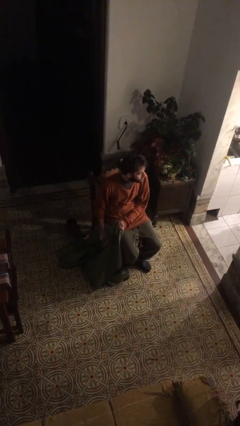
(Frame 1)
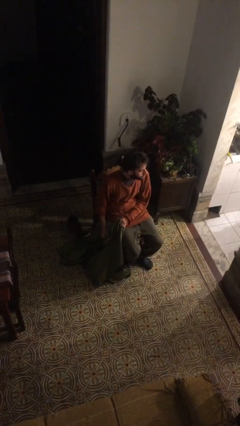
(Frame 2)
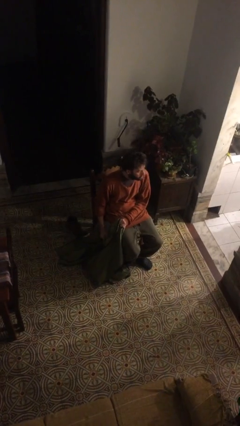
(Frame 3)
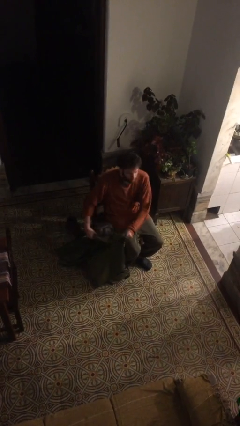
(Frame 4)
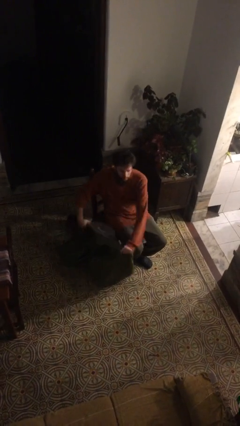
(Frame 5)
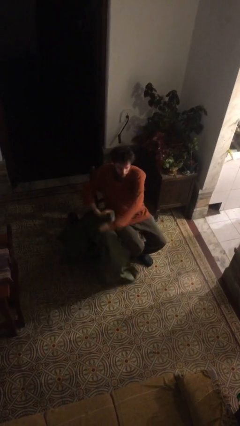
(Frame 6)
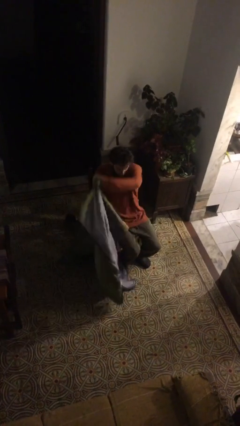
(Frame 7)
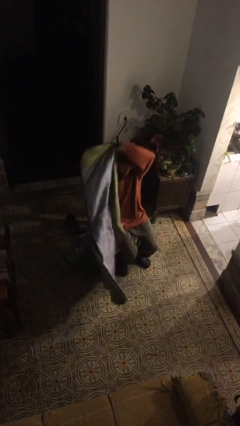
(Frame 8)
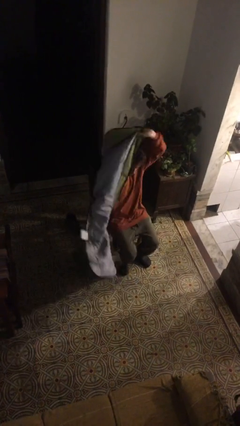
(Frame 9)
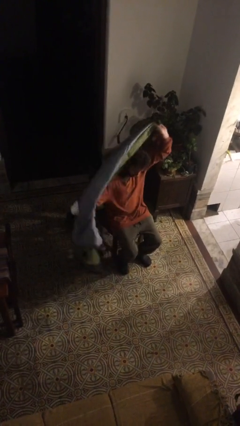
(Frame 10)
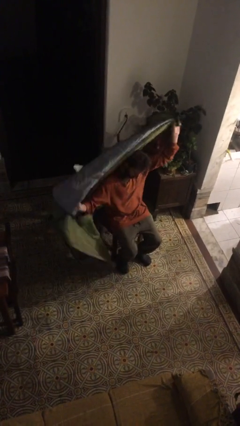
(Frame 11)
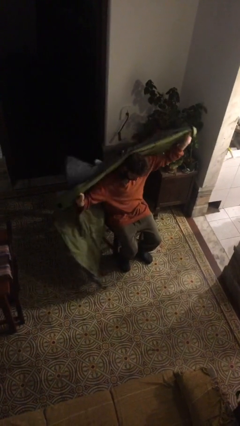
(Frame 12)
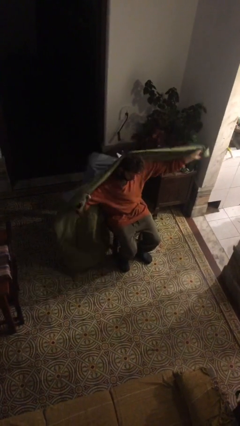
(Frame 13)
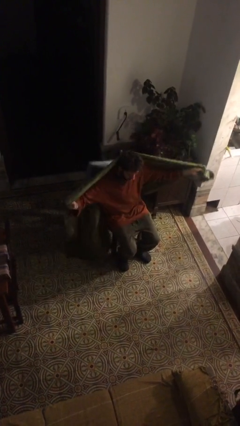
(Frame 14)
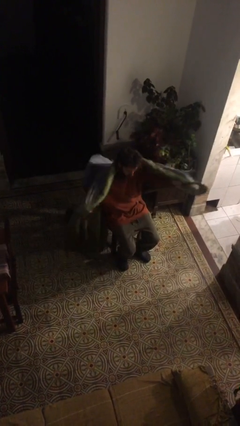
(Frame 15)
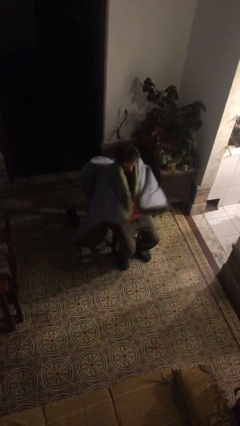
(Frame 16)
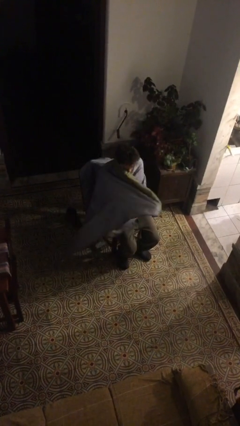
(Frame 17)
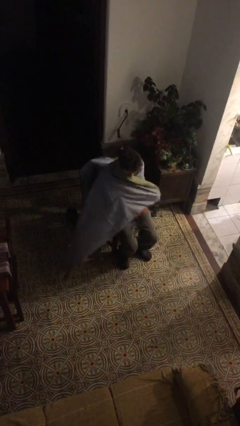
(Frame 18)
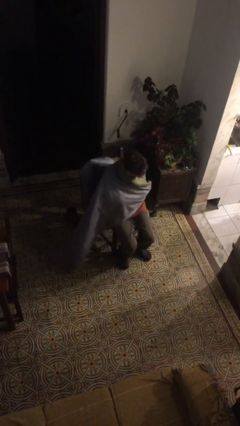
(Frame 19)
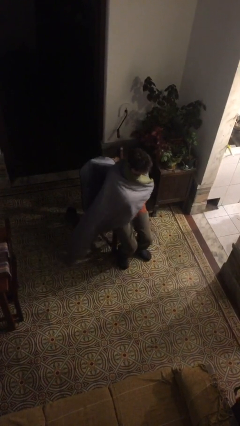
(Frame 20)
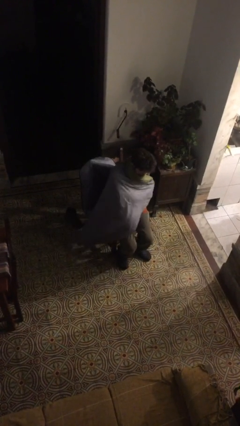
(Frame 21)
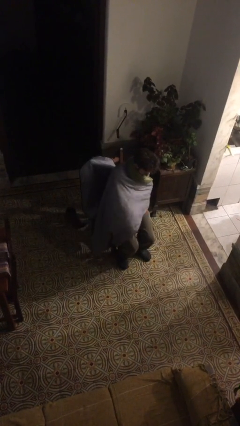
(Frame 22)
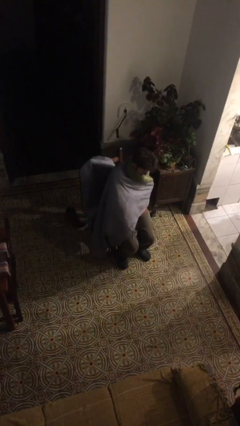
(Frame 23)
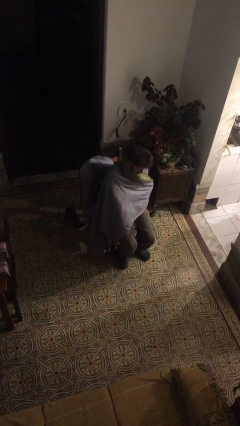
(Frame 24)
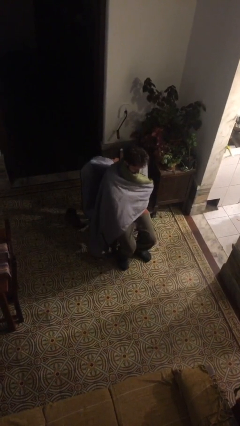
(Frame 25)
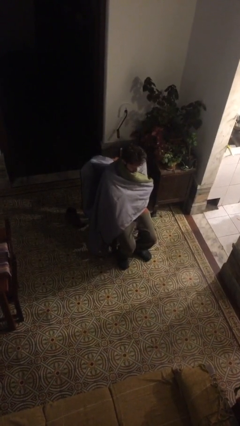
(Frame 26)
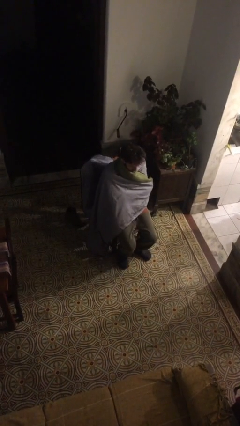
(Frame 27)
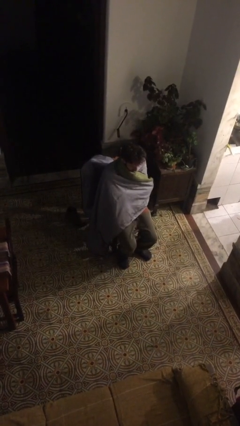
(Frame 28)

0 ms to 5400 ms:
person covers with blanket

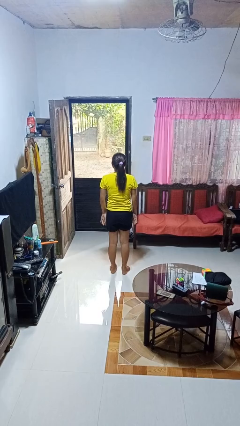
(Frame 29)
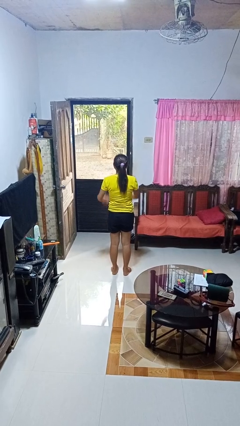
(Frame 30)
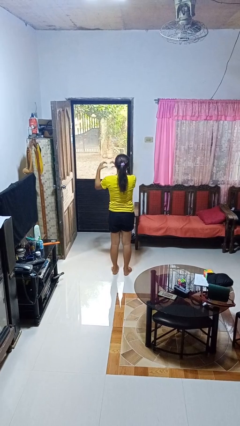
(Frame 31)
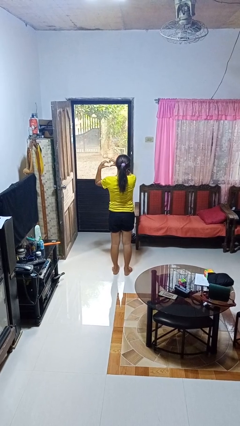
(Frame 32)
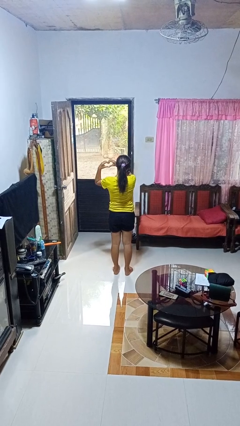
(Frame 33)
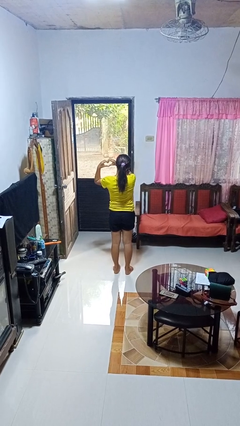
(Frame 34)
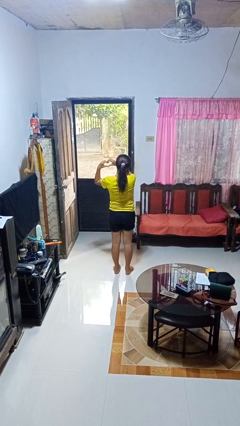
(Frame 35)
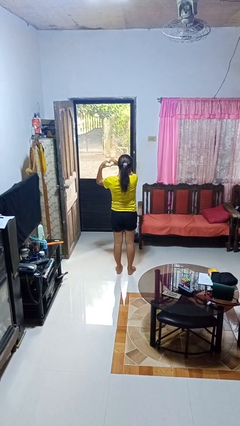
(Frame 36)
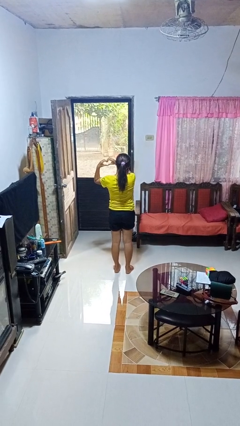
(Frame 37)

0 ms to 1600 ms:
person gestures heart

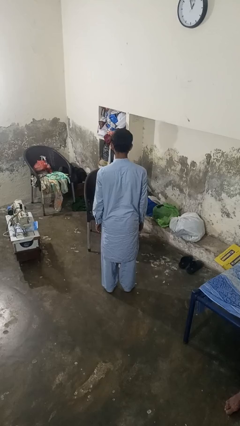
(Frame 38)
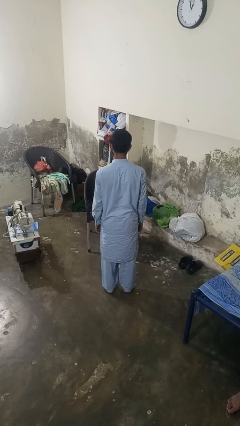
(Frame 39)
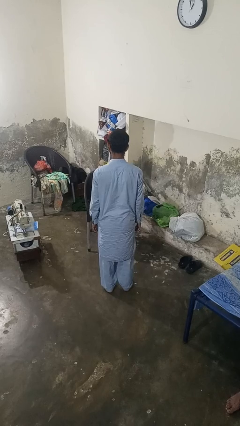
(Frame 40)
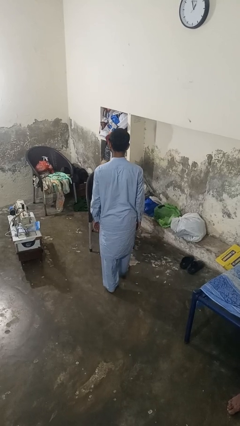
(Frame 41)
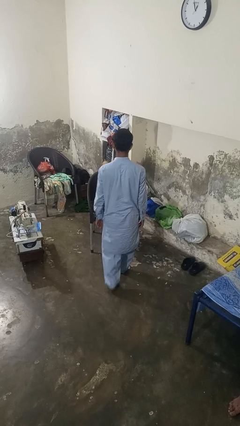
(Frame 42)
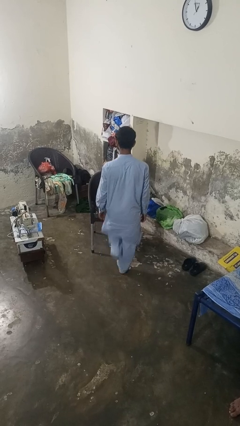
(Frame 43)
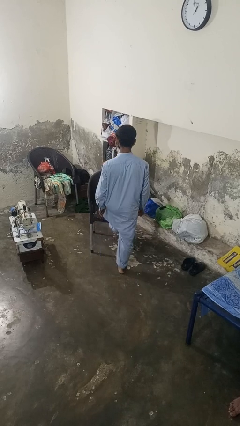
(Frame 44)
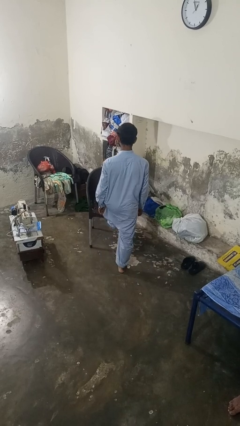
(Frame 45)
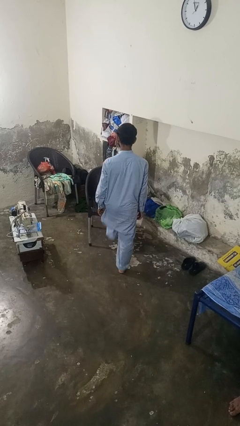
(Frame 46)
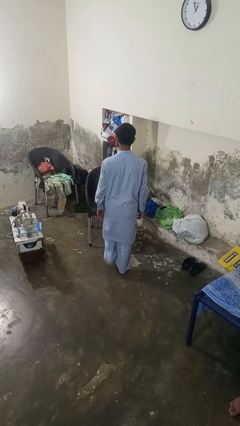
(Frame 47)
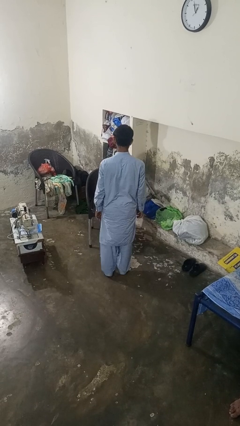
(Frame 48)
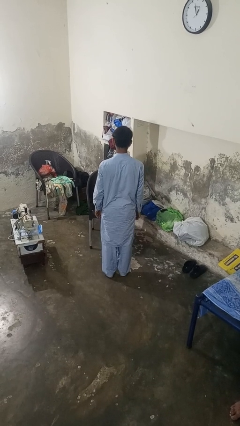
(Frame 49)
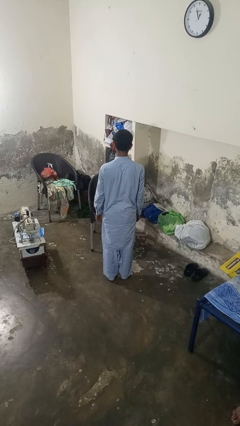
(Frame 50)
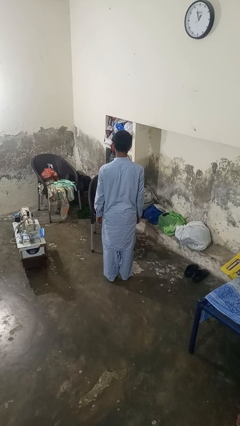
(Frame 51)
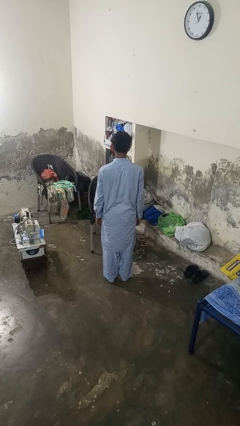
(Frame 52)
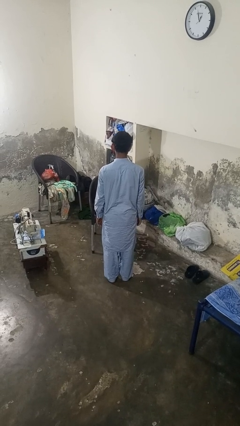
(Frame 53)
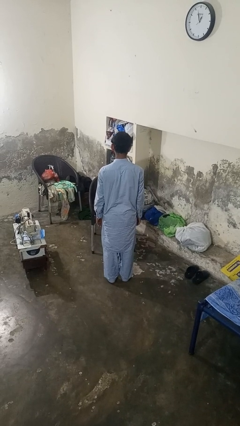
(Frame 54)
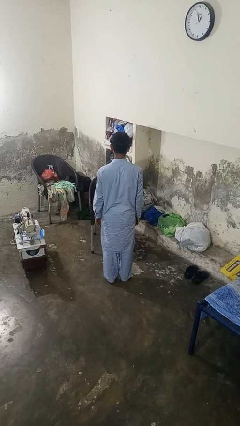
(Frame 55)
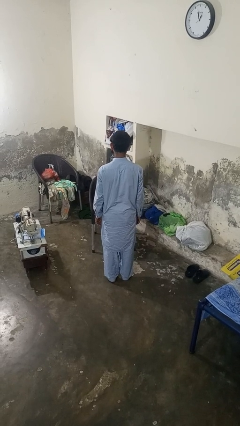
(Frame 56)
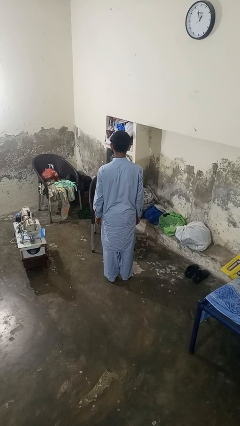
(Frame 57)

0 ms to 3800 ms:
person stubs toe

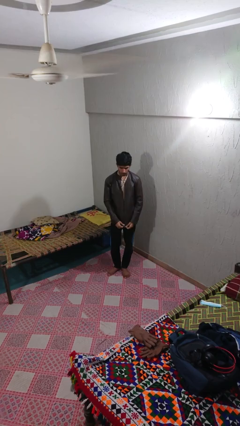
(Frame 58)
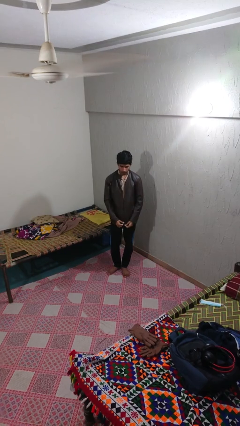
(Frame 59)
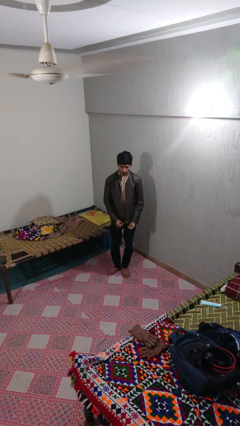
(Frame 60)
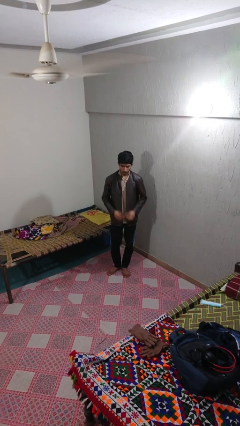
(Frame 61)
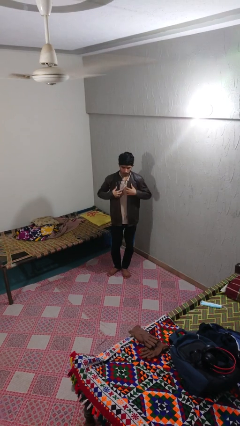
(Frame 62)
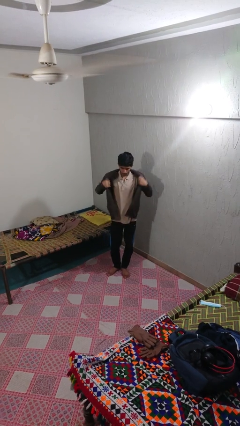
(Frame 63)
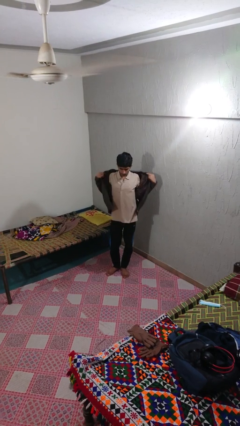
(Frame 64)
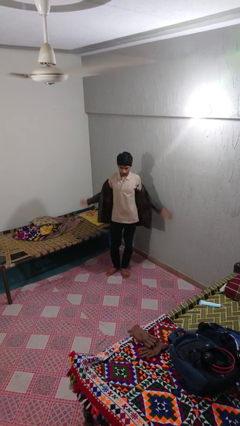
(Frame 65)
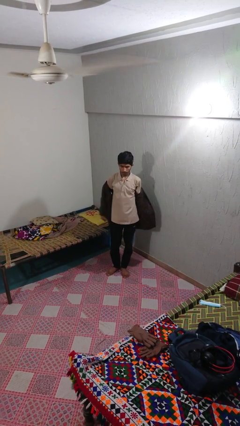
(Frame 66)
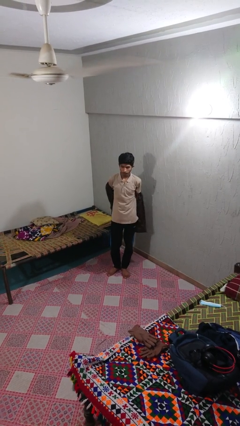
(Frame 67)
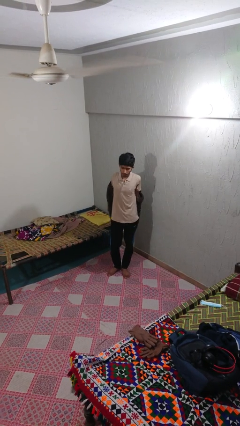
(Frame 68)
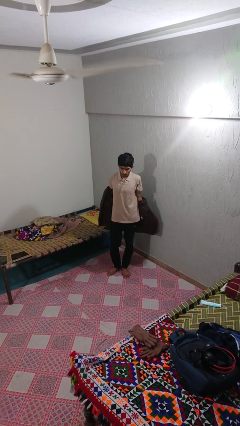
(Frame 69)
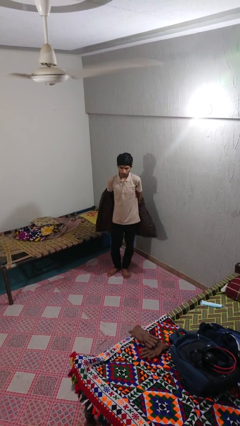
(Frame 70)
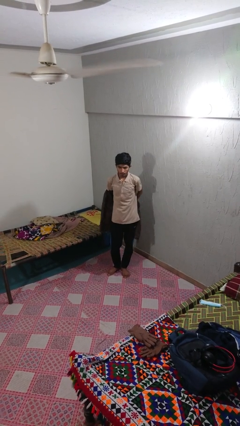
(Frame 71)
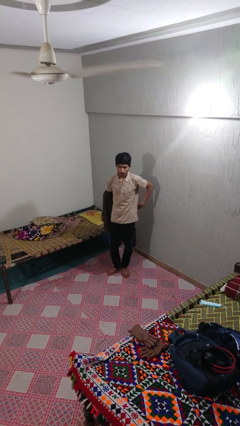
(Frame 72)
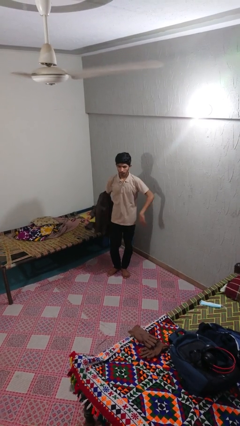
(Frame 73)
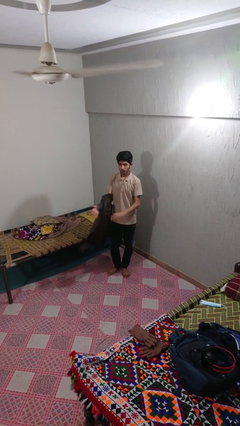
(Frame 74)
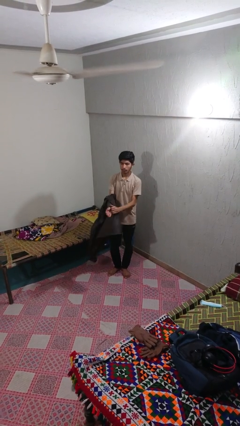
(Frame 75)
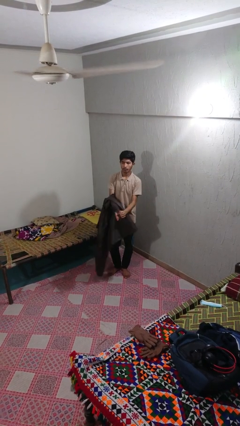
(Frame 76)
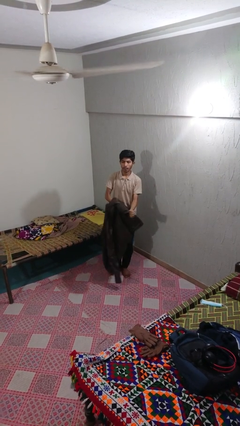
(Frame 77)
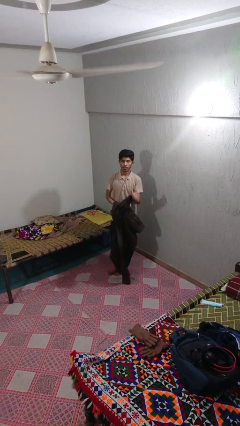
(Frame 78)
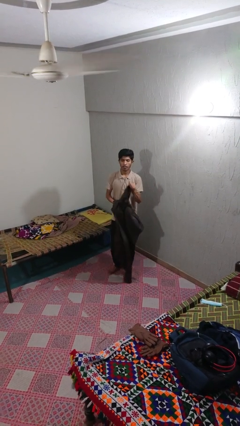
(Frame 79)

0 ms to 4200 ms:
person takes off jacket

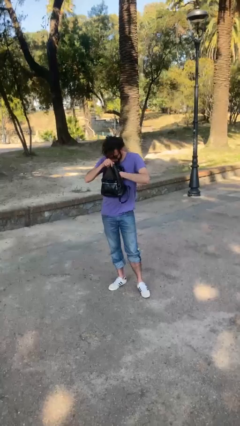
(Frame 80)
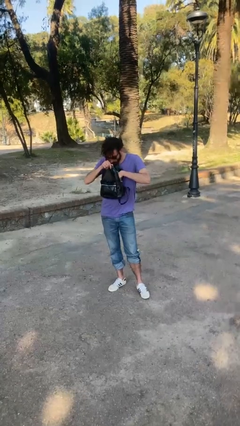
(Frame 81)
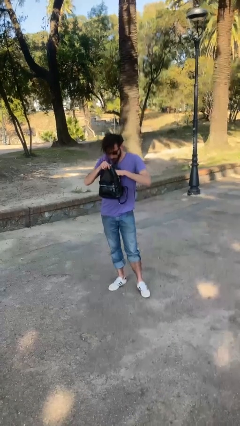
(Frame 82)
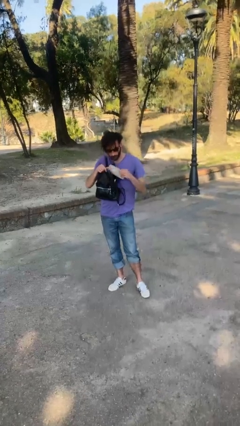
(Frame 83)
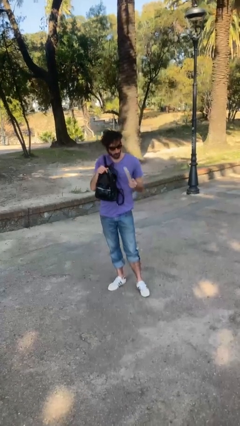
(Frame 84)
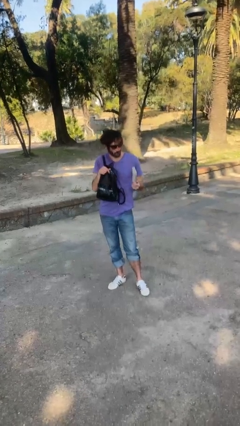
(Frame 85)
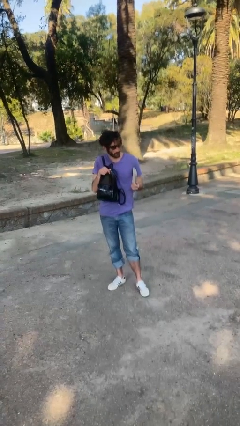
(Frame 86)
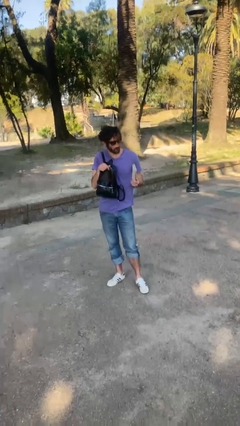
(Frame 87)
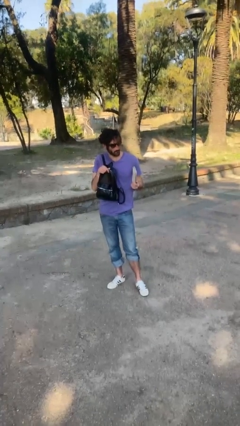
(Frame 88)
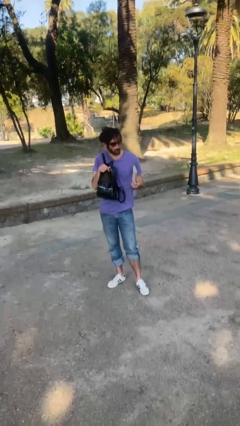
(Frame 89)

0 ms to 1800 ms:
person takes object from purse

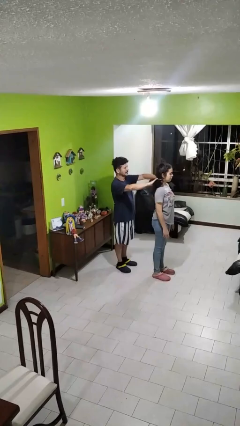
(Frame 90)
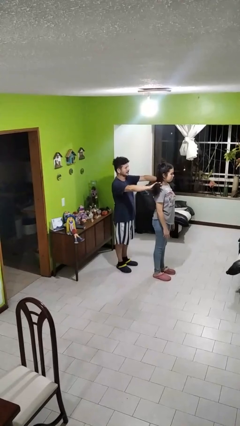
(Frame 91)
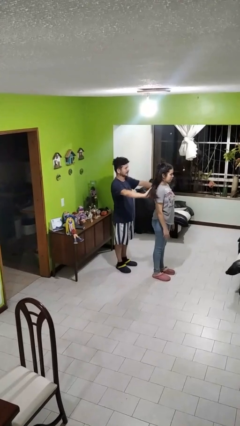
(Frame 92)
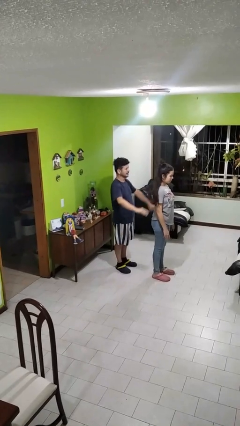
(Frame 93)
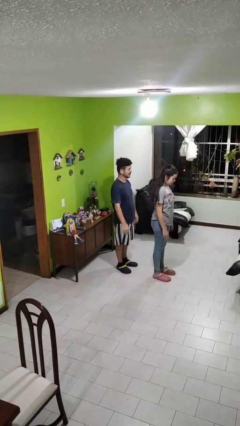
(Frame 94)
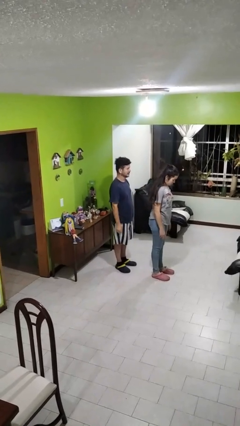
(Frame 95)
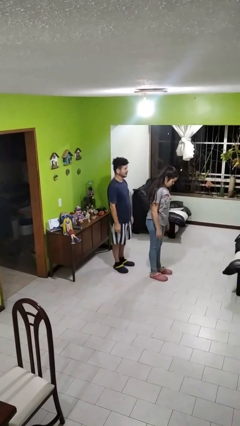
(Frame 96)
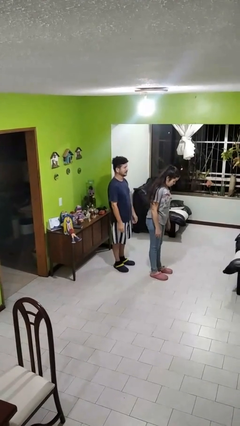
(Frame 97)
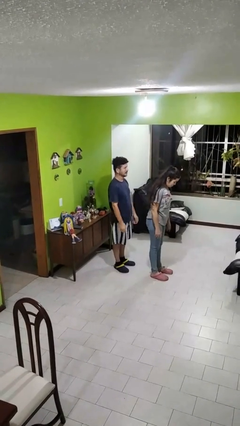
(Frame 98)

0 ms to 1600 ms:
person grabs person by hair
